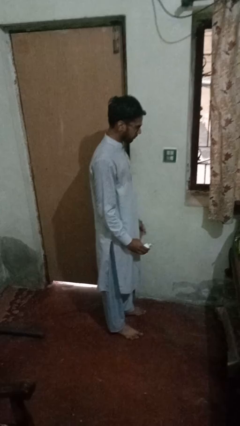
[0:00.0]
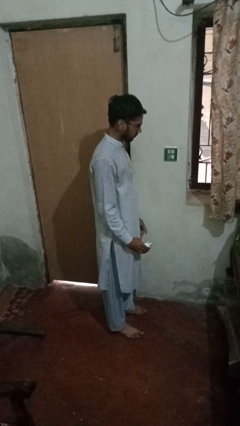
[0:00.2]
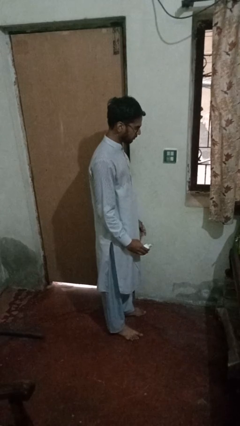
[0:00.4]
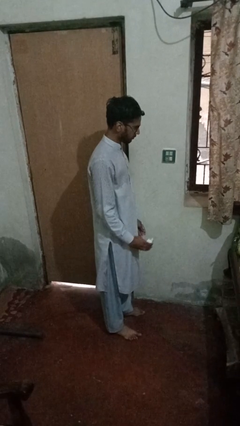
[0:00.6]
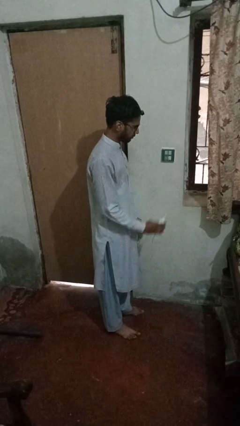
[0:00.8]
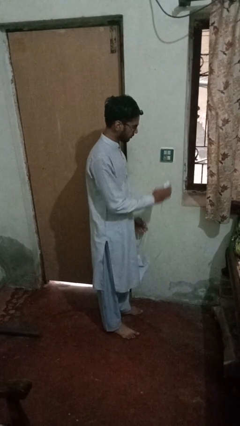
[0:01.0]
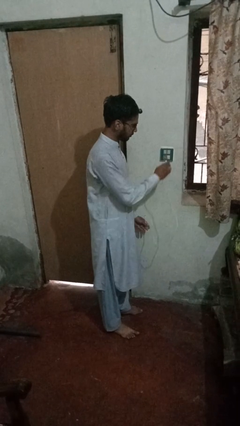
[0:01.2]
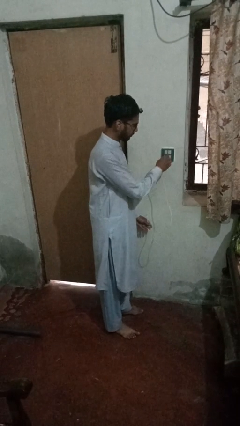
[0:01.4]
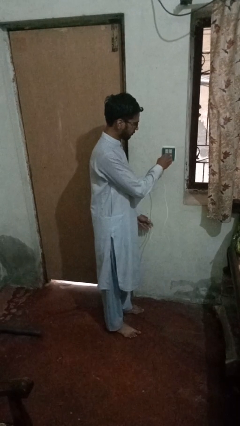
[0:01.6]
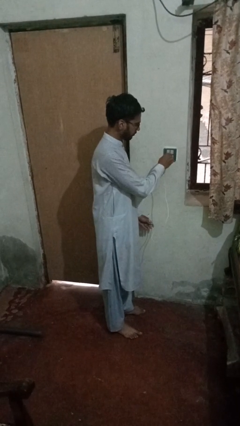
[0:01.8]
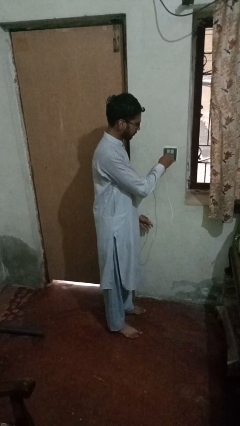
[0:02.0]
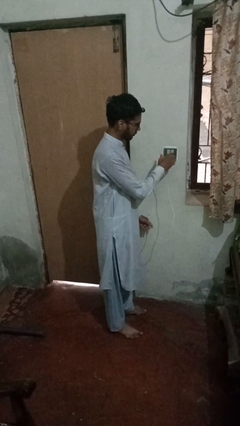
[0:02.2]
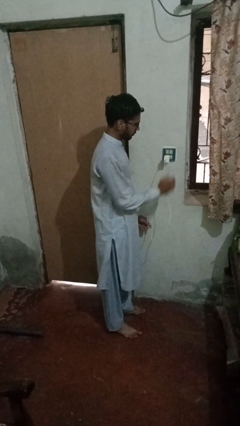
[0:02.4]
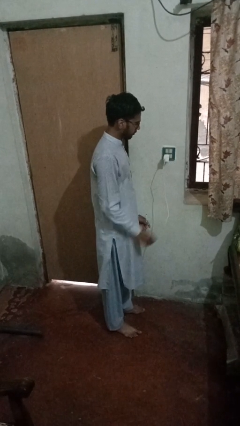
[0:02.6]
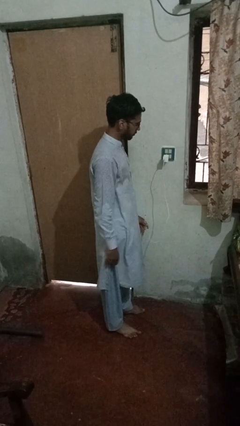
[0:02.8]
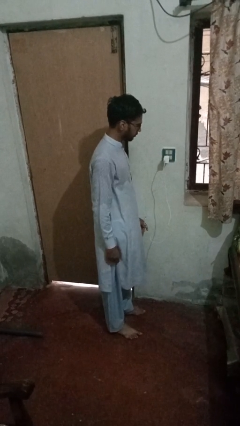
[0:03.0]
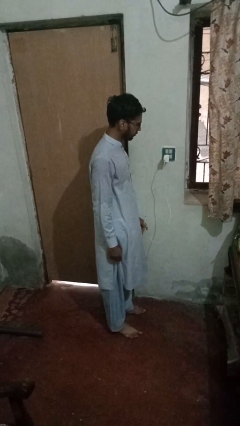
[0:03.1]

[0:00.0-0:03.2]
person plugs into electrical socket

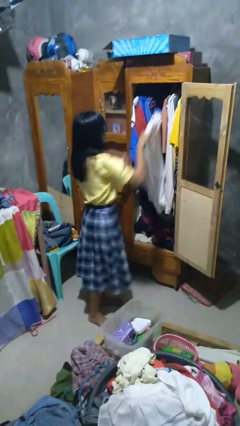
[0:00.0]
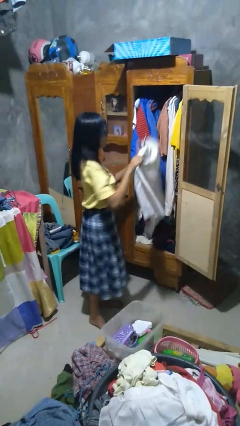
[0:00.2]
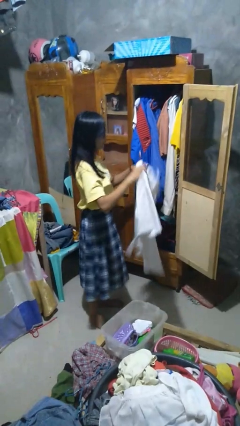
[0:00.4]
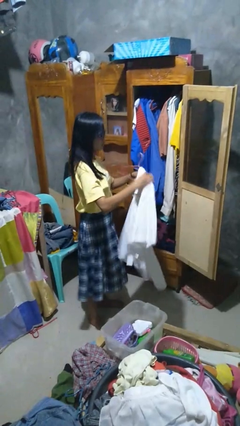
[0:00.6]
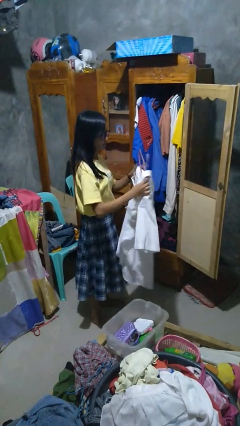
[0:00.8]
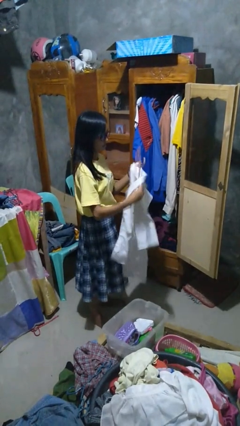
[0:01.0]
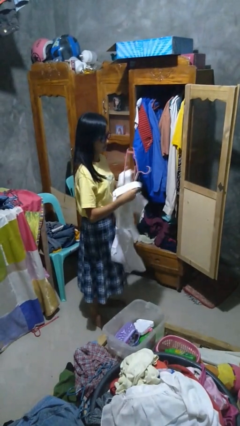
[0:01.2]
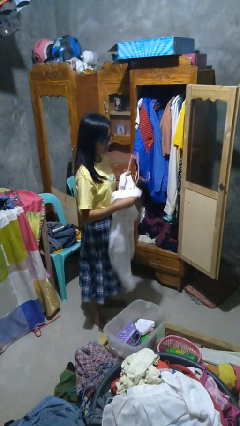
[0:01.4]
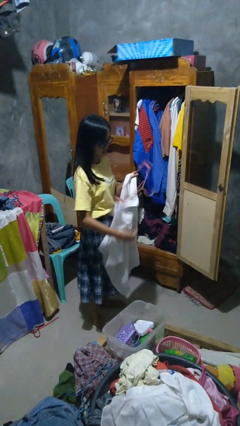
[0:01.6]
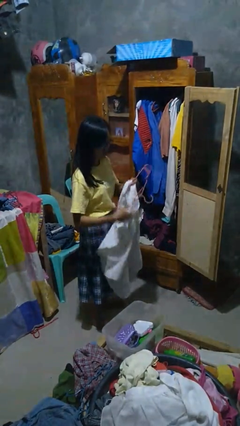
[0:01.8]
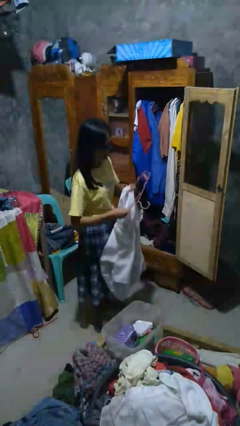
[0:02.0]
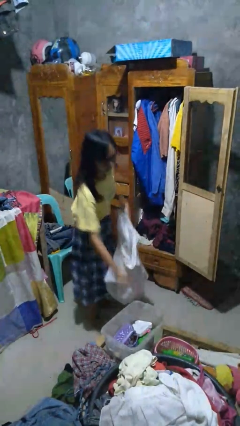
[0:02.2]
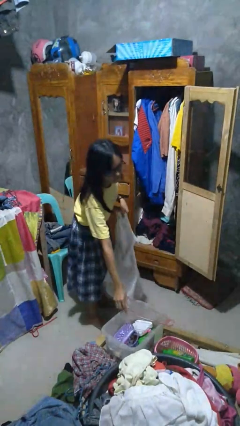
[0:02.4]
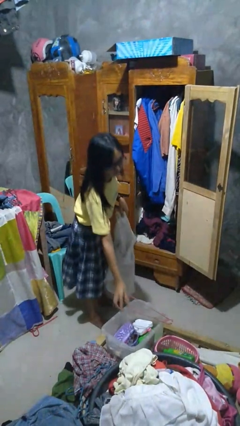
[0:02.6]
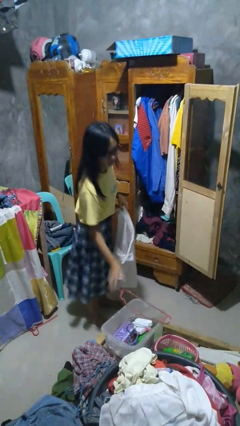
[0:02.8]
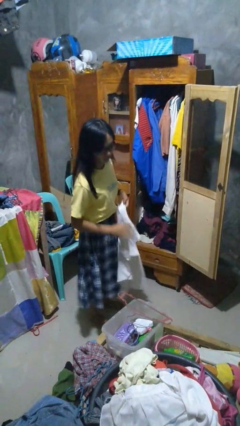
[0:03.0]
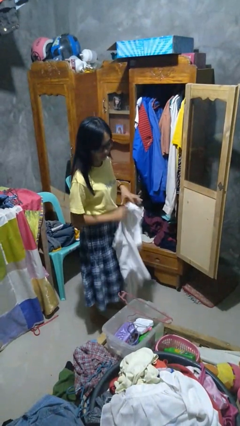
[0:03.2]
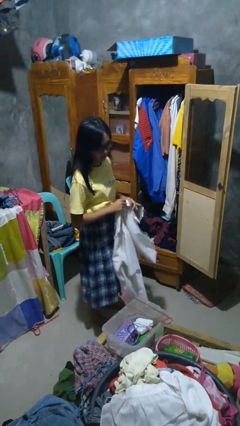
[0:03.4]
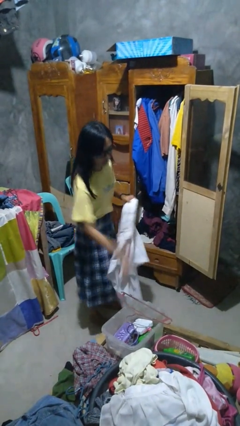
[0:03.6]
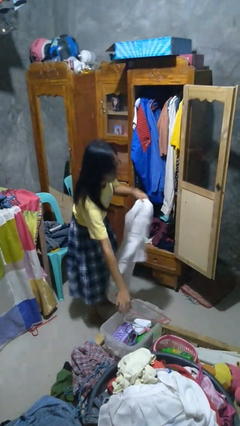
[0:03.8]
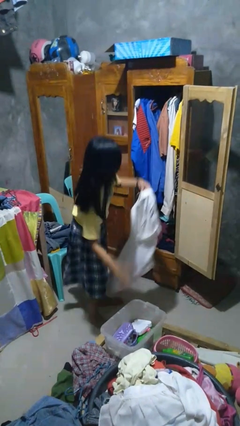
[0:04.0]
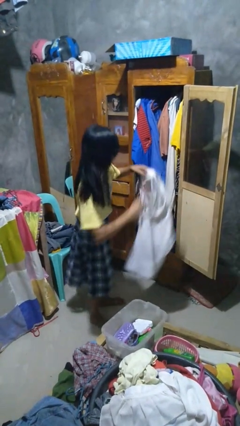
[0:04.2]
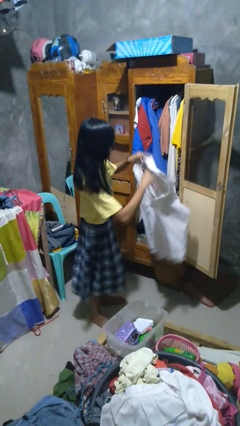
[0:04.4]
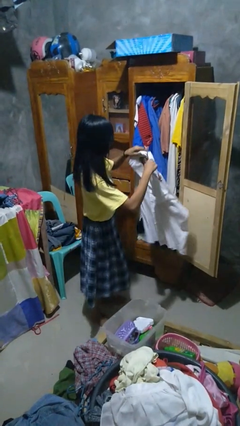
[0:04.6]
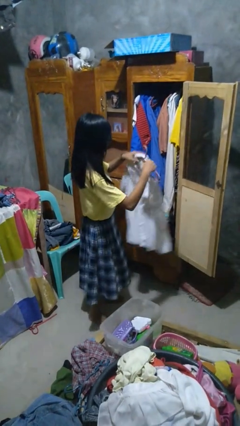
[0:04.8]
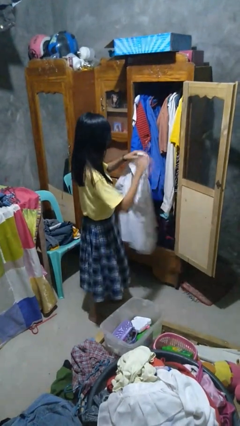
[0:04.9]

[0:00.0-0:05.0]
person takes clothes from closet

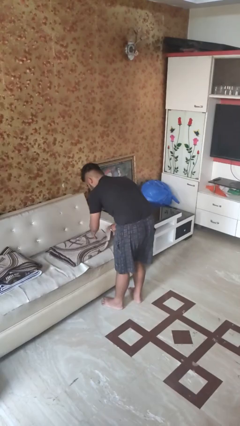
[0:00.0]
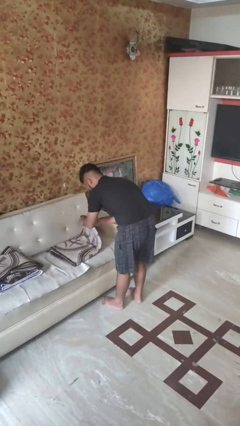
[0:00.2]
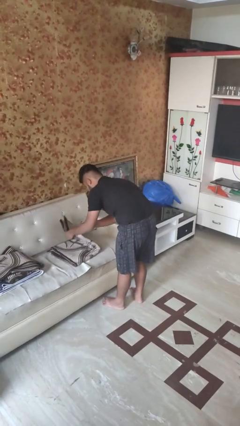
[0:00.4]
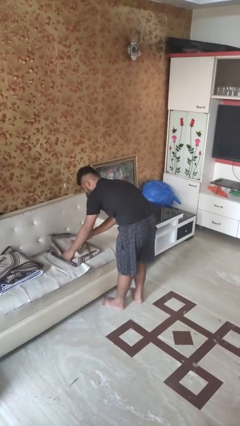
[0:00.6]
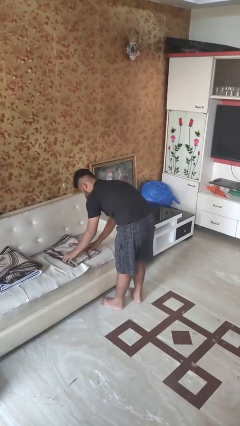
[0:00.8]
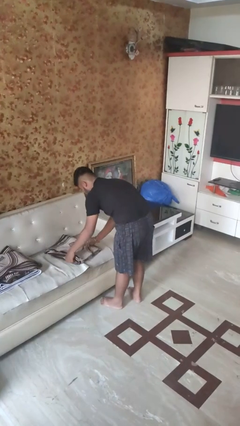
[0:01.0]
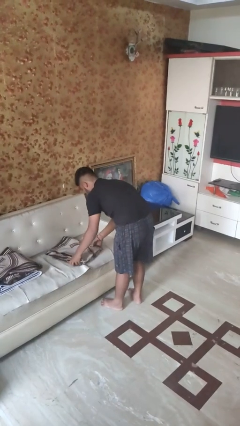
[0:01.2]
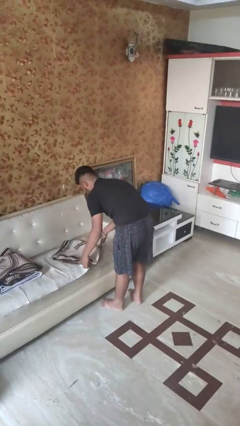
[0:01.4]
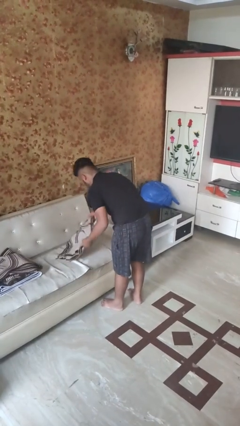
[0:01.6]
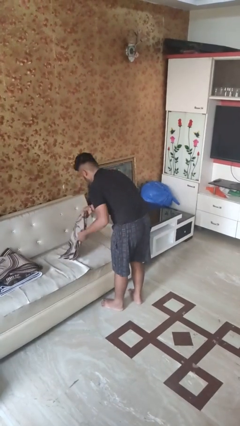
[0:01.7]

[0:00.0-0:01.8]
person folds towel

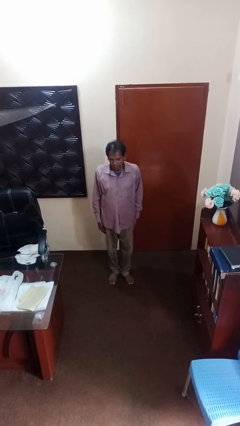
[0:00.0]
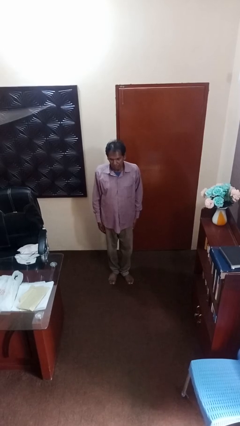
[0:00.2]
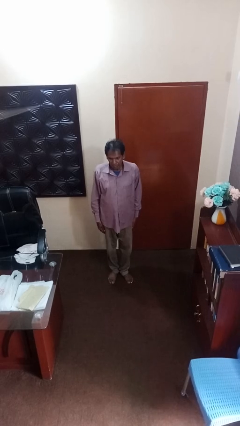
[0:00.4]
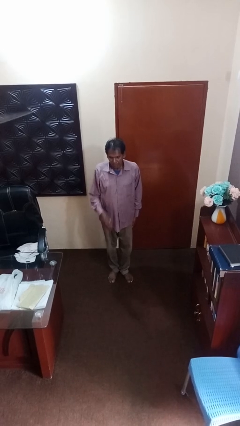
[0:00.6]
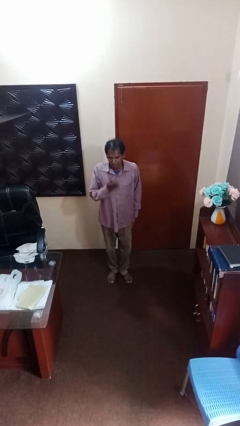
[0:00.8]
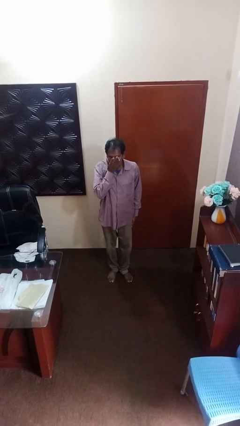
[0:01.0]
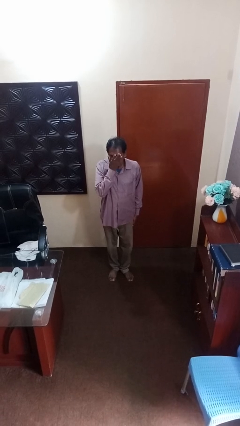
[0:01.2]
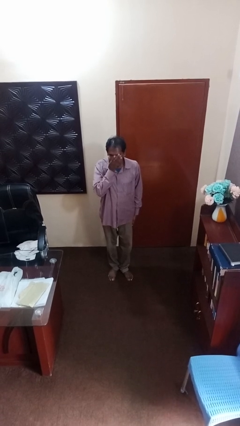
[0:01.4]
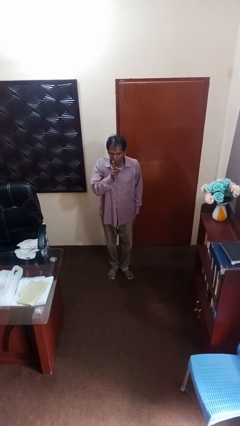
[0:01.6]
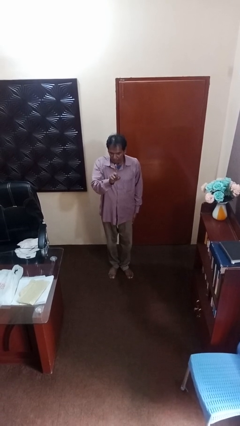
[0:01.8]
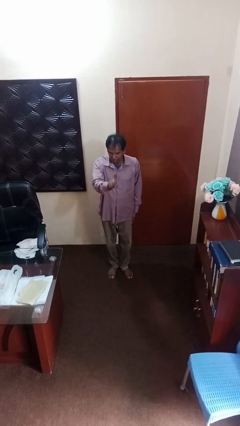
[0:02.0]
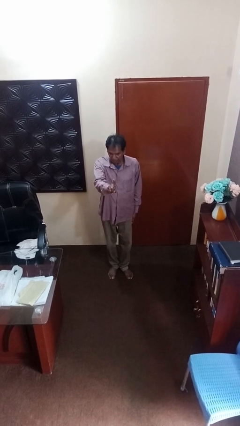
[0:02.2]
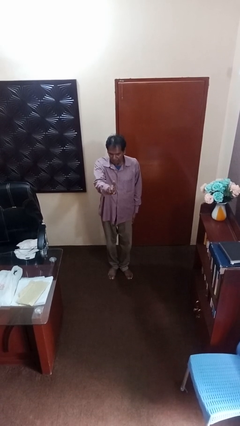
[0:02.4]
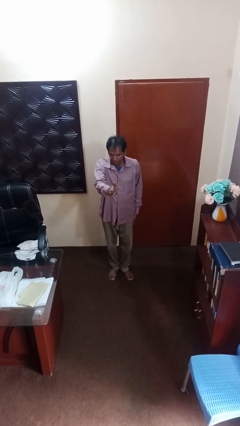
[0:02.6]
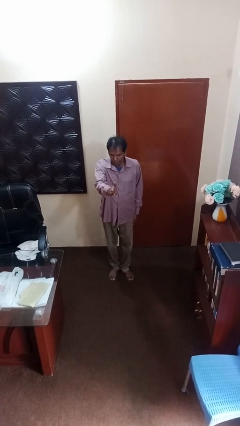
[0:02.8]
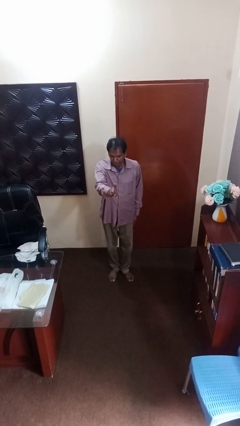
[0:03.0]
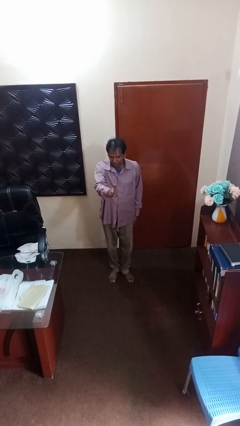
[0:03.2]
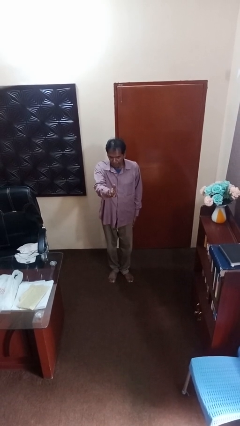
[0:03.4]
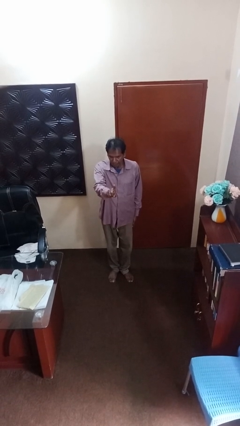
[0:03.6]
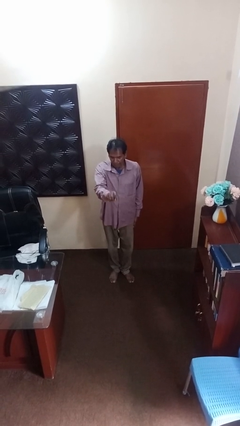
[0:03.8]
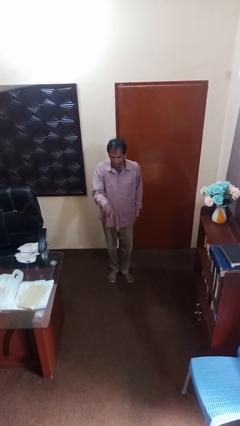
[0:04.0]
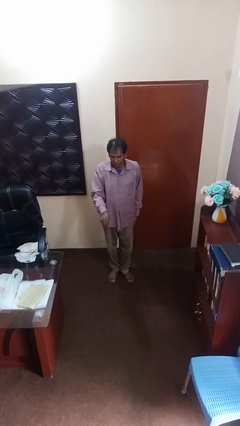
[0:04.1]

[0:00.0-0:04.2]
person gestures behind me

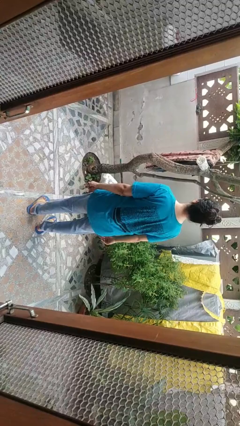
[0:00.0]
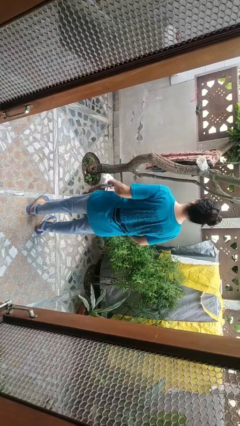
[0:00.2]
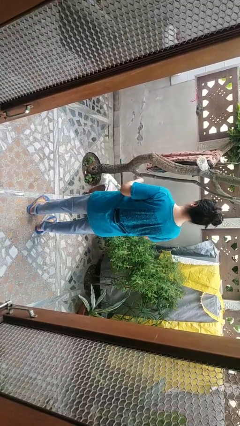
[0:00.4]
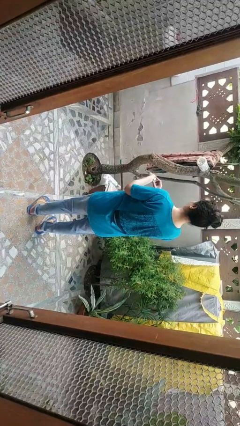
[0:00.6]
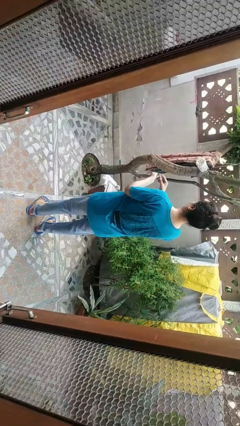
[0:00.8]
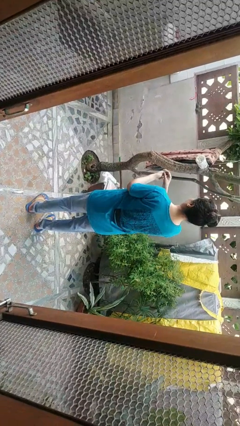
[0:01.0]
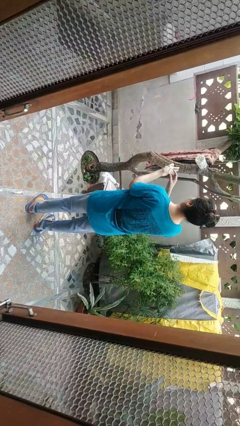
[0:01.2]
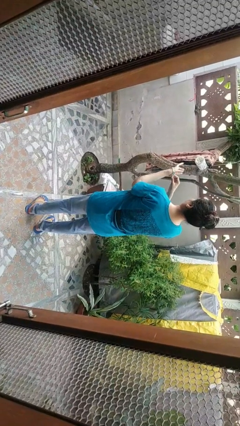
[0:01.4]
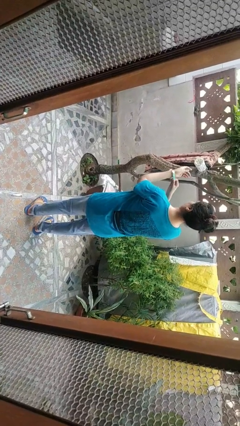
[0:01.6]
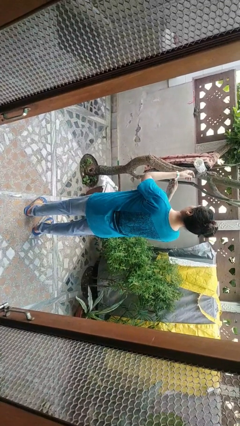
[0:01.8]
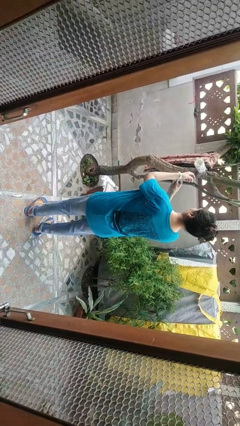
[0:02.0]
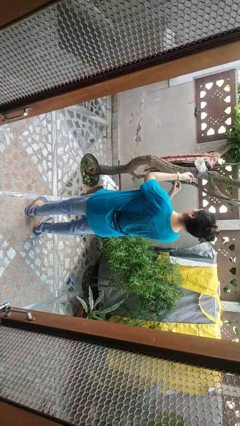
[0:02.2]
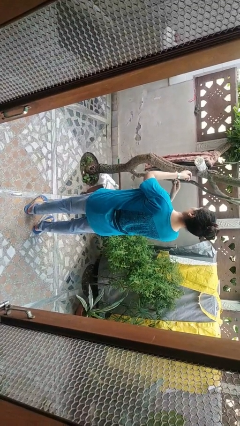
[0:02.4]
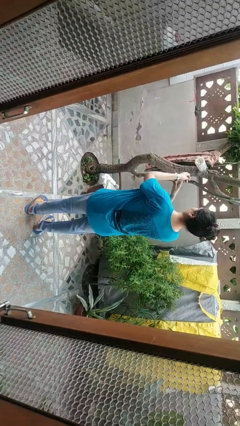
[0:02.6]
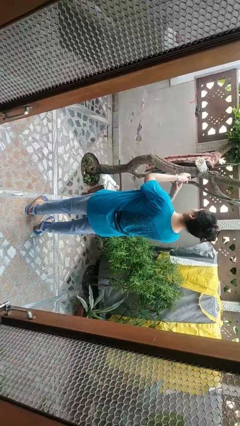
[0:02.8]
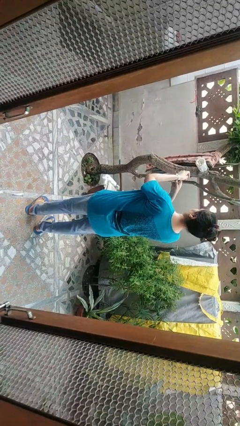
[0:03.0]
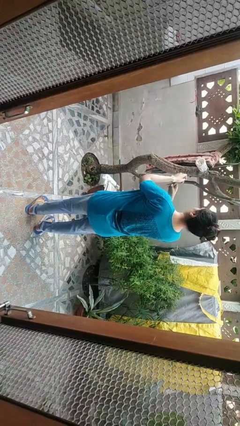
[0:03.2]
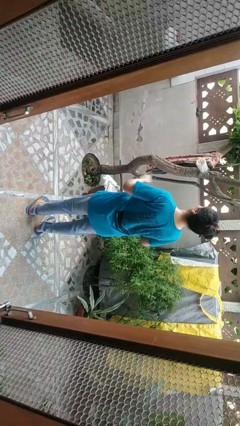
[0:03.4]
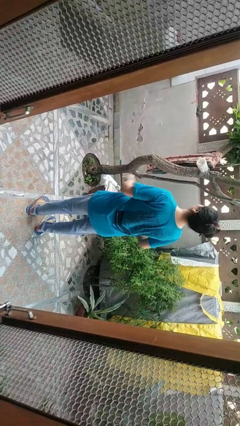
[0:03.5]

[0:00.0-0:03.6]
person puts on wristwatch
